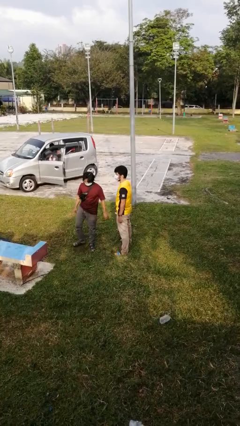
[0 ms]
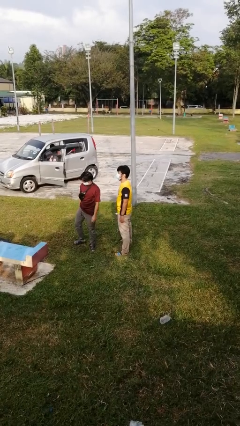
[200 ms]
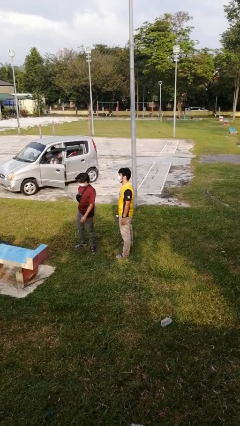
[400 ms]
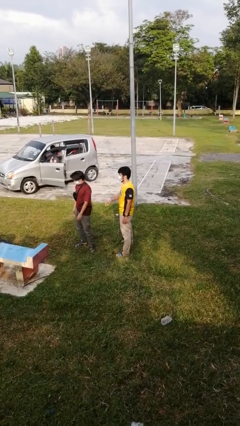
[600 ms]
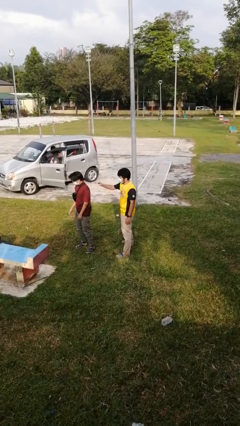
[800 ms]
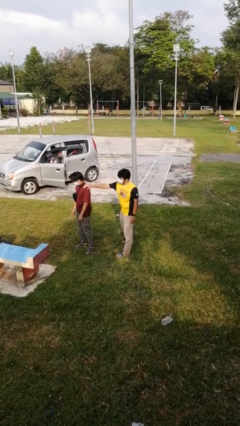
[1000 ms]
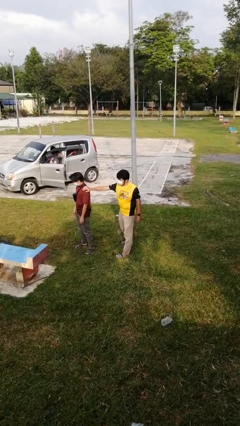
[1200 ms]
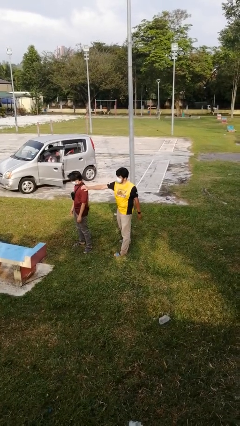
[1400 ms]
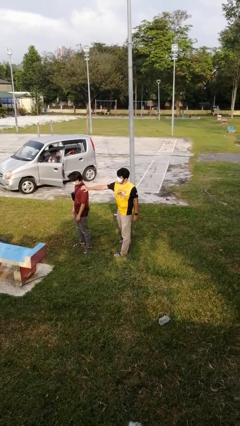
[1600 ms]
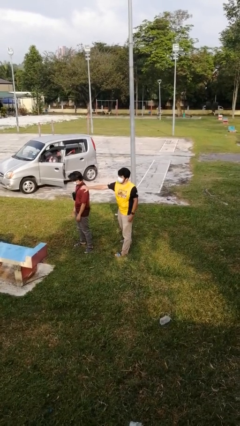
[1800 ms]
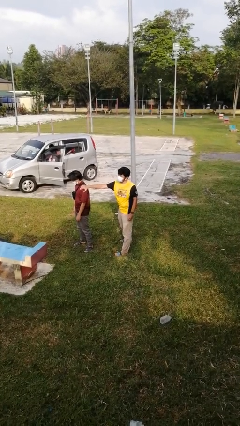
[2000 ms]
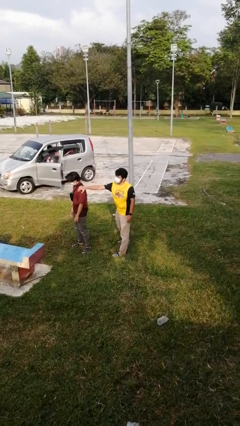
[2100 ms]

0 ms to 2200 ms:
person grabs person by shoulder

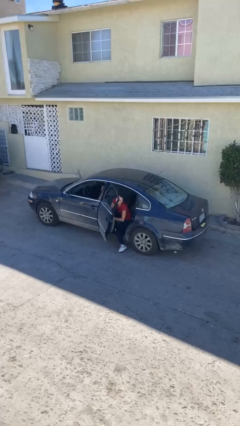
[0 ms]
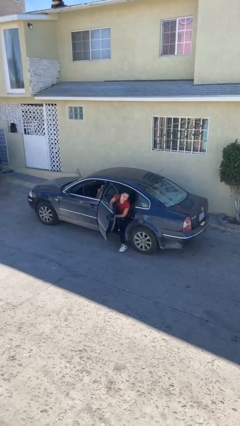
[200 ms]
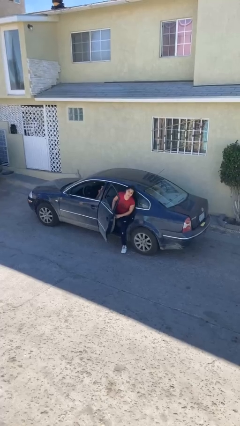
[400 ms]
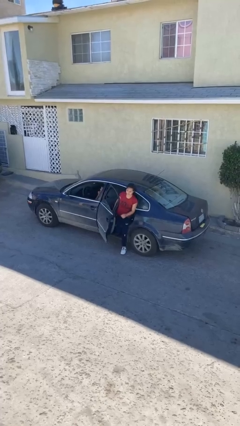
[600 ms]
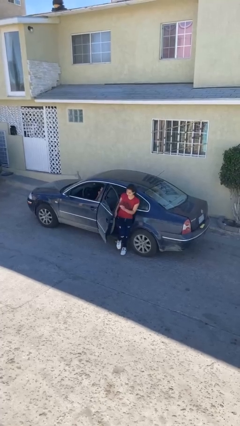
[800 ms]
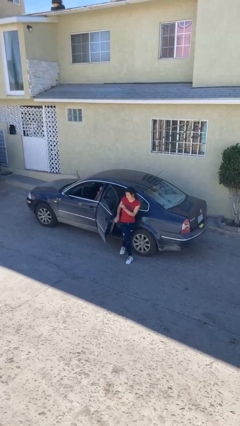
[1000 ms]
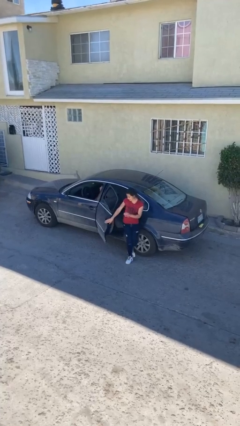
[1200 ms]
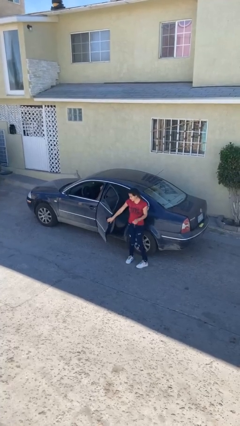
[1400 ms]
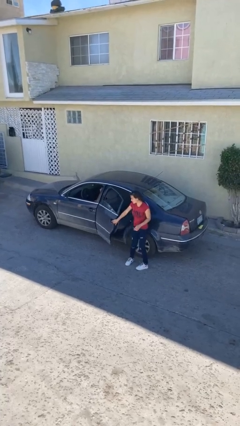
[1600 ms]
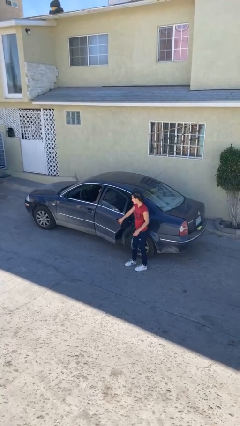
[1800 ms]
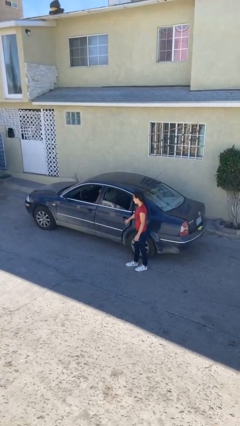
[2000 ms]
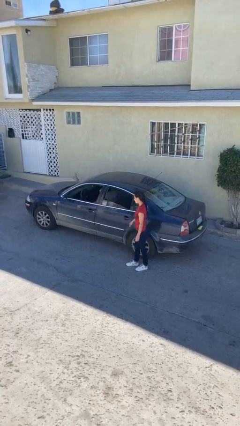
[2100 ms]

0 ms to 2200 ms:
car drops off person

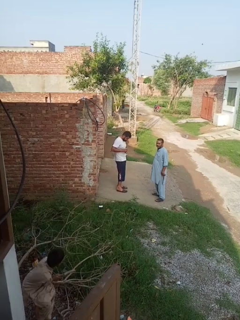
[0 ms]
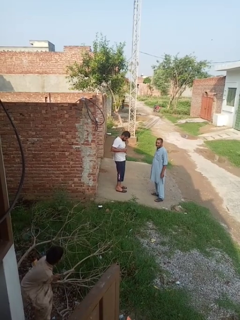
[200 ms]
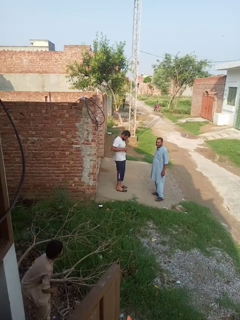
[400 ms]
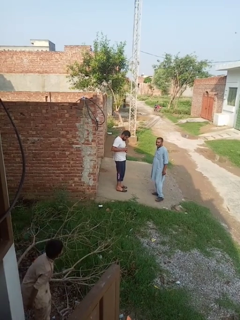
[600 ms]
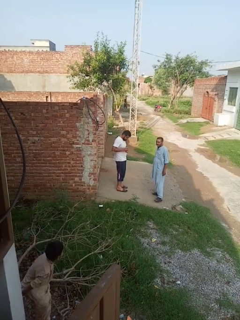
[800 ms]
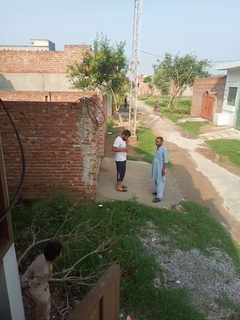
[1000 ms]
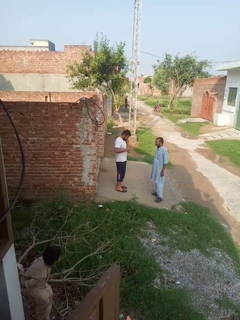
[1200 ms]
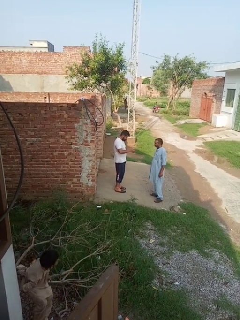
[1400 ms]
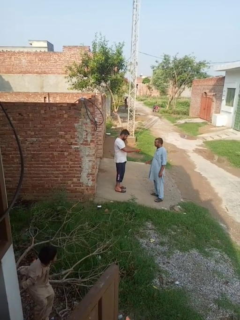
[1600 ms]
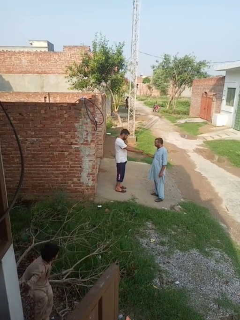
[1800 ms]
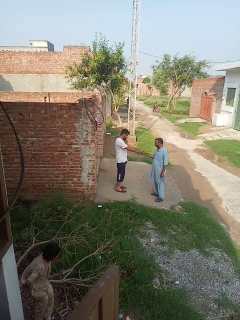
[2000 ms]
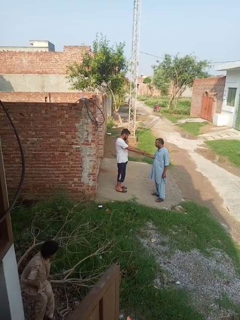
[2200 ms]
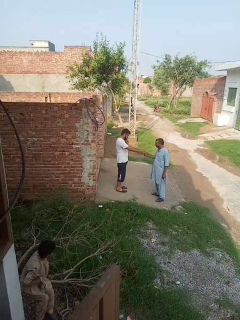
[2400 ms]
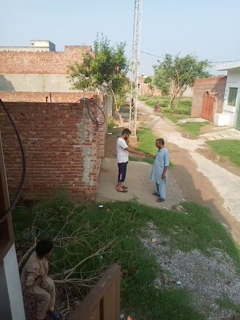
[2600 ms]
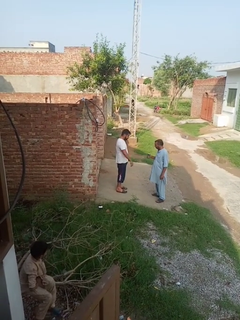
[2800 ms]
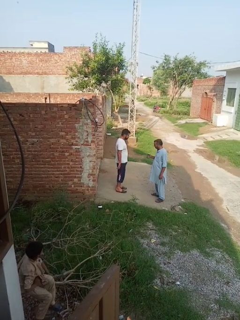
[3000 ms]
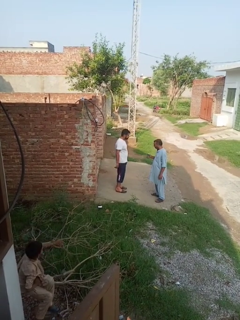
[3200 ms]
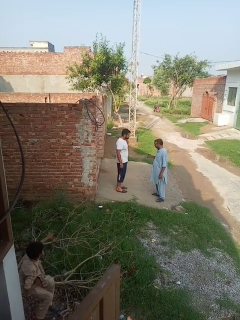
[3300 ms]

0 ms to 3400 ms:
person transfers object to person

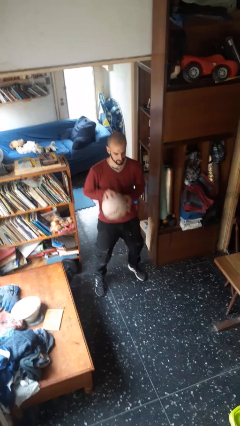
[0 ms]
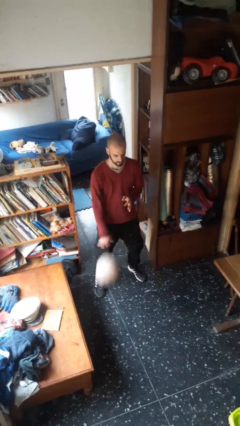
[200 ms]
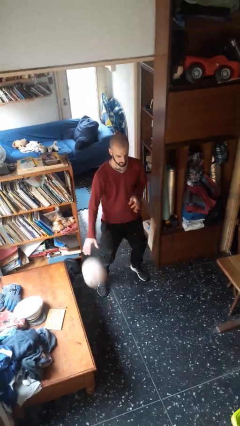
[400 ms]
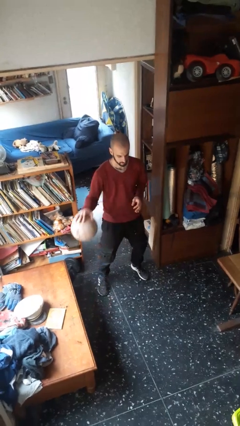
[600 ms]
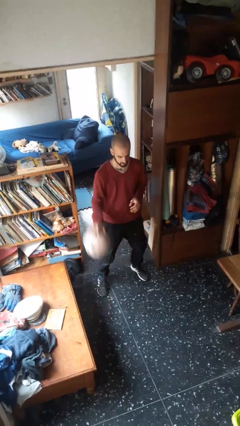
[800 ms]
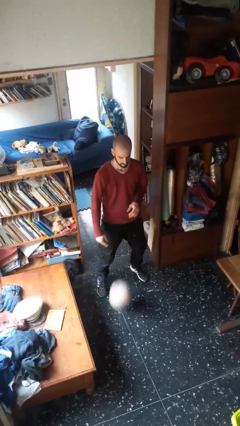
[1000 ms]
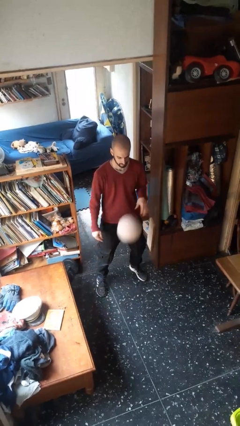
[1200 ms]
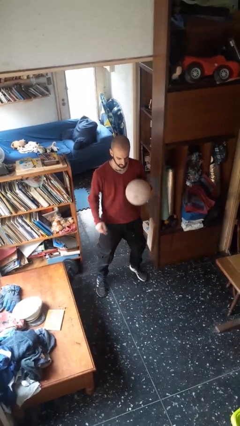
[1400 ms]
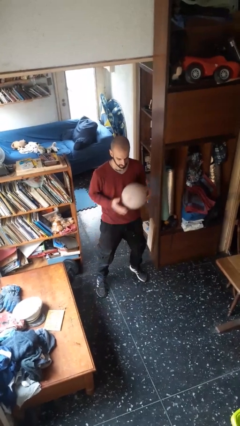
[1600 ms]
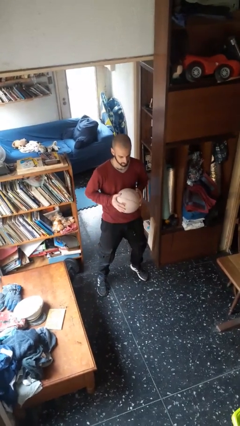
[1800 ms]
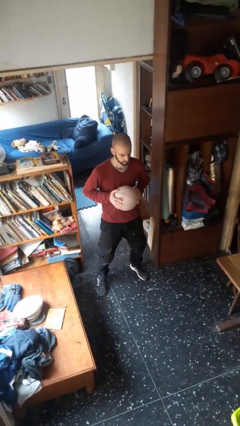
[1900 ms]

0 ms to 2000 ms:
person bounces ball on floor

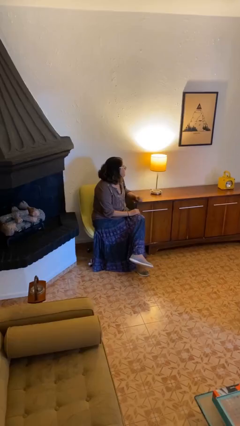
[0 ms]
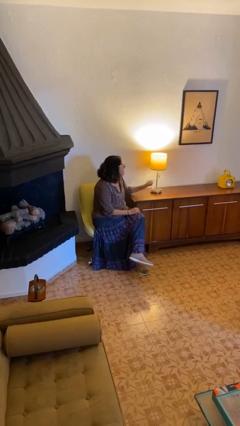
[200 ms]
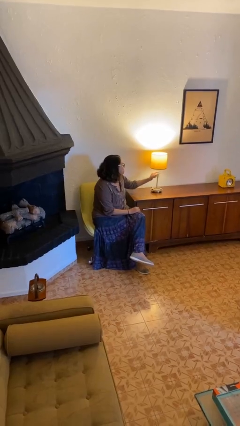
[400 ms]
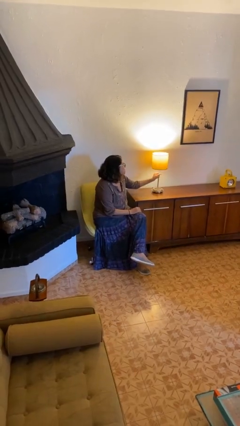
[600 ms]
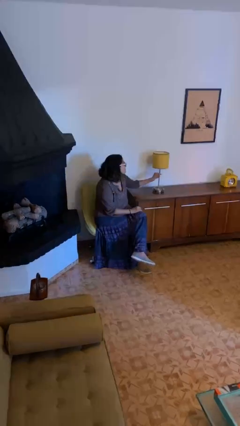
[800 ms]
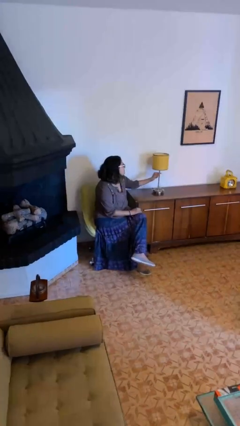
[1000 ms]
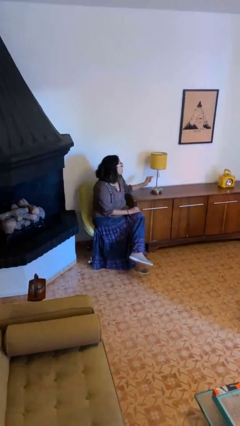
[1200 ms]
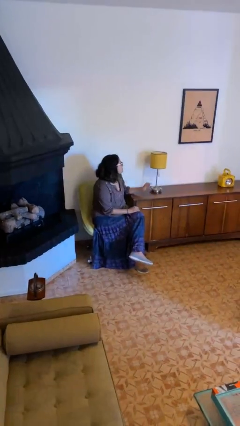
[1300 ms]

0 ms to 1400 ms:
person turns off lamp

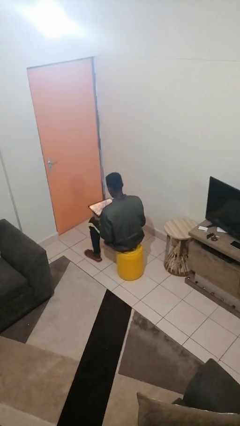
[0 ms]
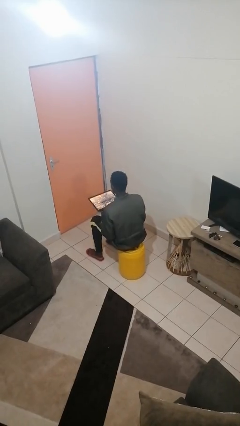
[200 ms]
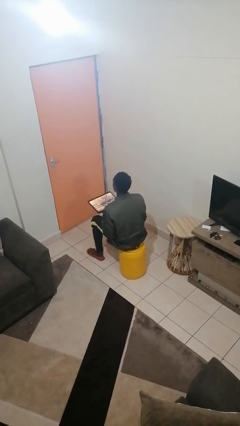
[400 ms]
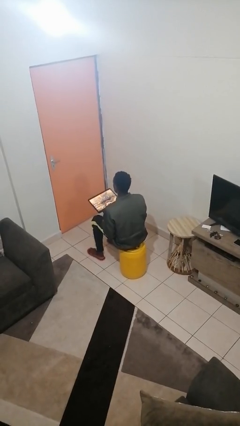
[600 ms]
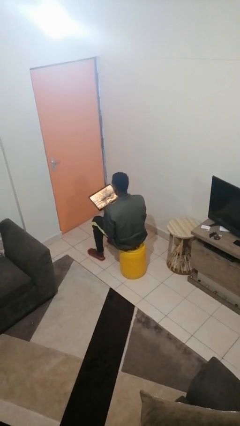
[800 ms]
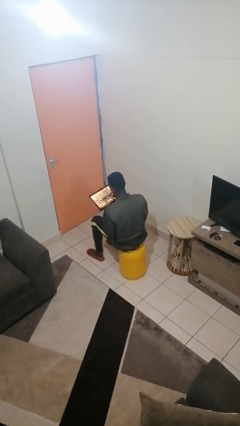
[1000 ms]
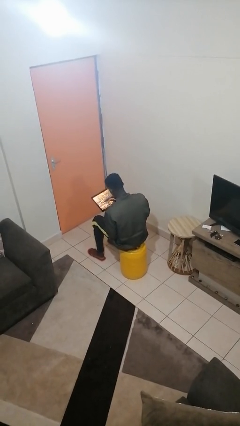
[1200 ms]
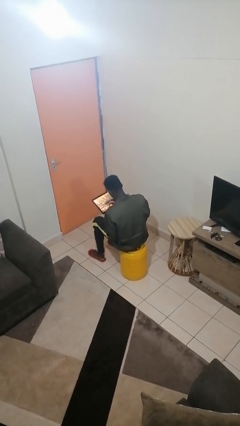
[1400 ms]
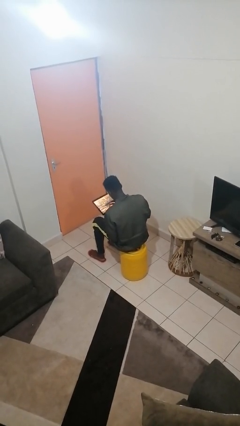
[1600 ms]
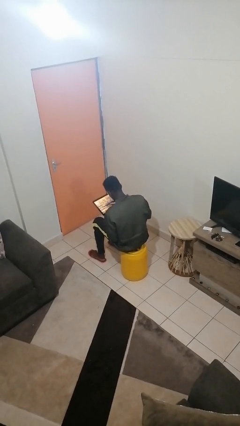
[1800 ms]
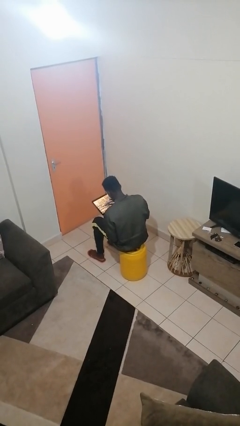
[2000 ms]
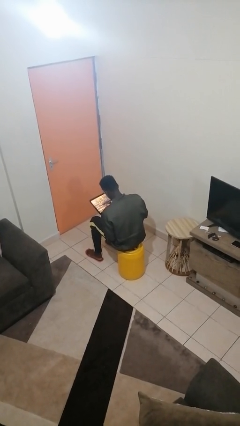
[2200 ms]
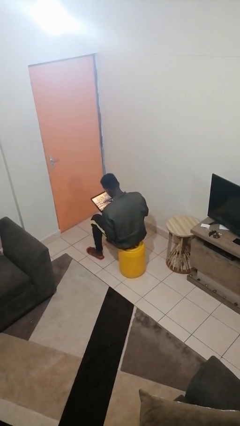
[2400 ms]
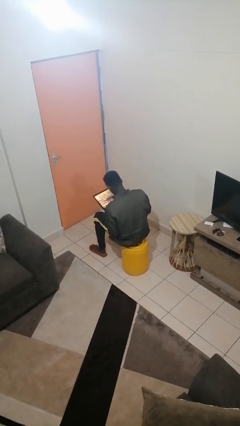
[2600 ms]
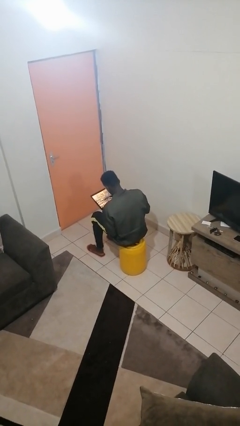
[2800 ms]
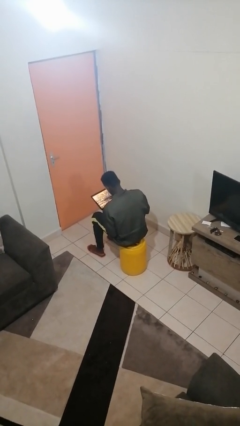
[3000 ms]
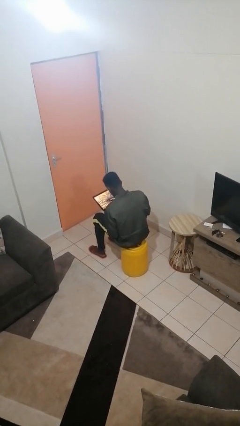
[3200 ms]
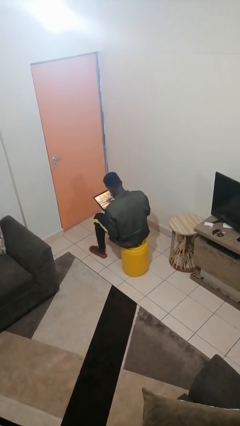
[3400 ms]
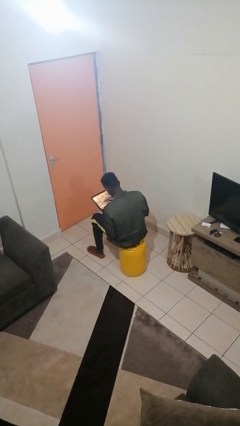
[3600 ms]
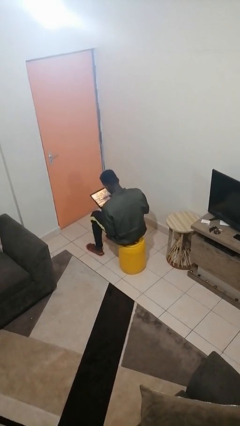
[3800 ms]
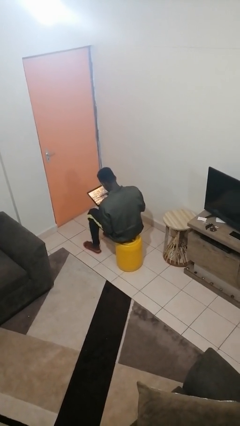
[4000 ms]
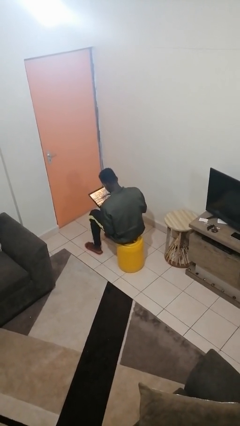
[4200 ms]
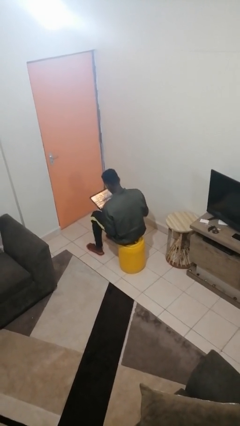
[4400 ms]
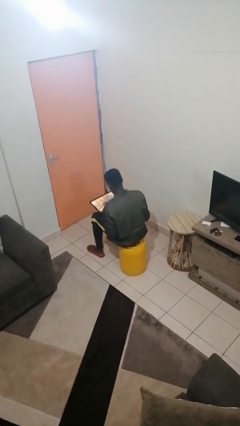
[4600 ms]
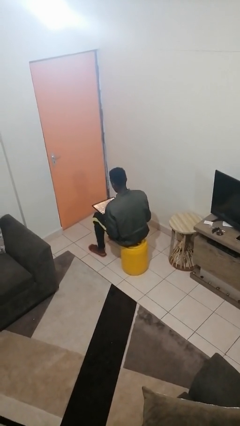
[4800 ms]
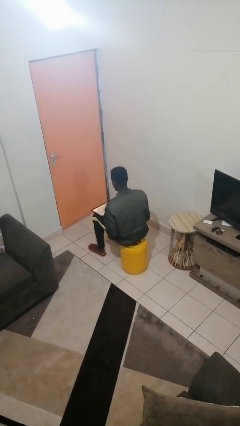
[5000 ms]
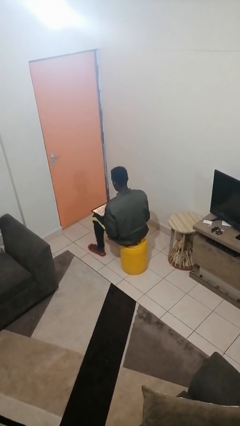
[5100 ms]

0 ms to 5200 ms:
person interacts with tablet

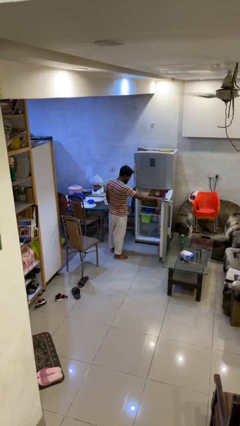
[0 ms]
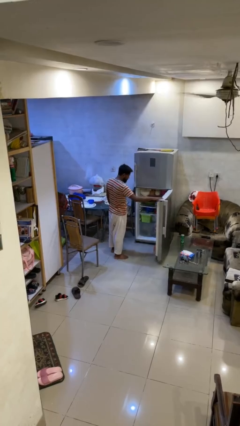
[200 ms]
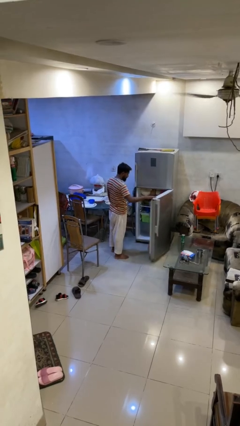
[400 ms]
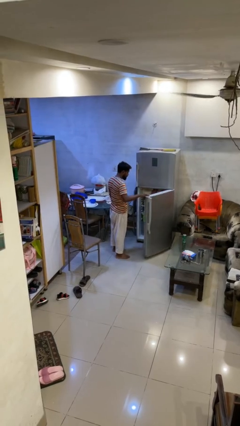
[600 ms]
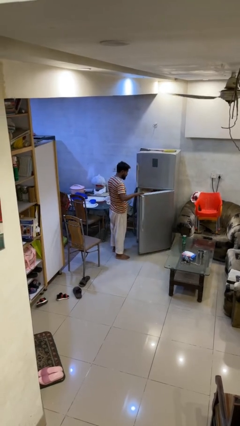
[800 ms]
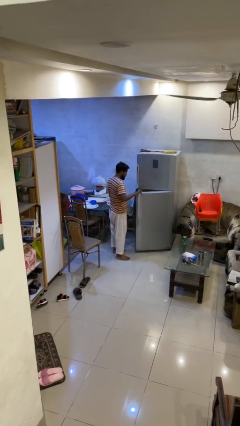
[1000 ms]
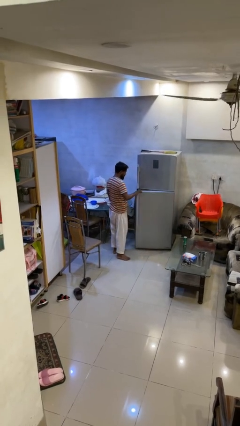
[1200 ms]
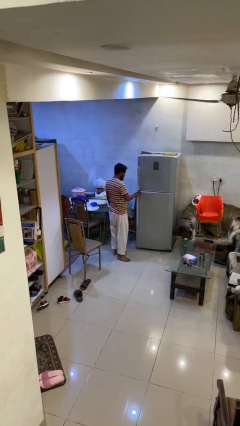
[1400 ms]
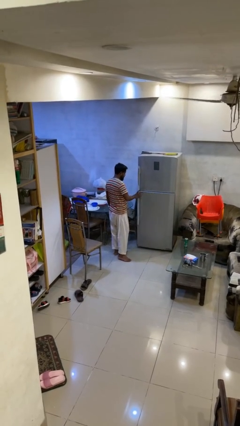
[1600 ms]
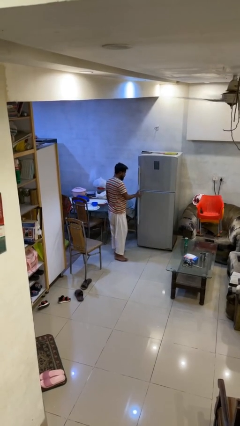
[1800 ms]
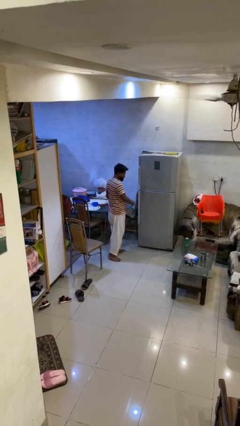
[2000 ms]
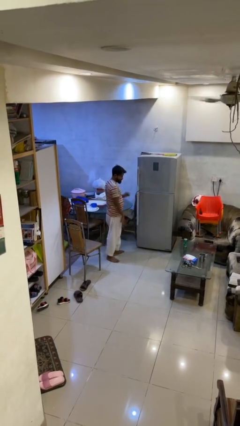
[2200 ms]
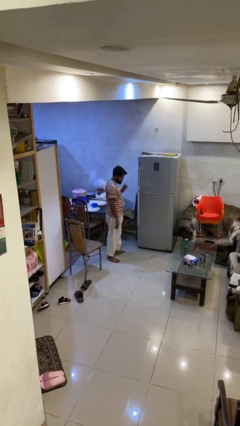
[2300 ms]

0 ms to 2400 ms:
person closes refrigerator
